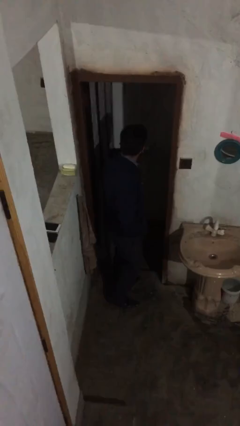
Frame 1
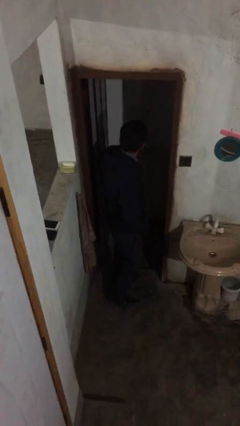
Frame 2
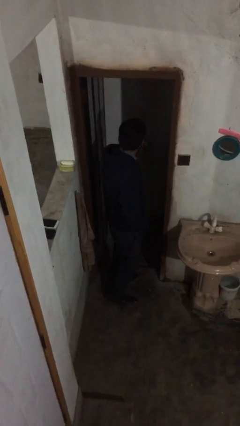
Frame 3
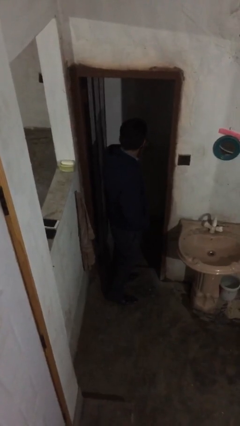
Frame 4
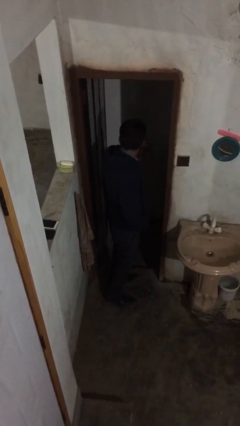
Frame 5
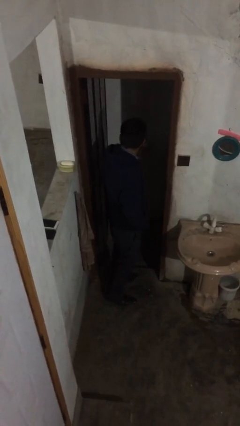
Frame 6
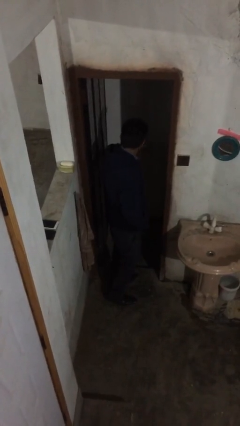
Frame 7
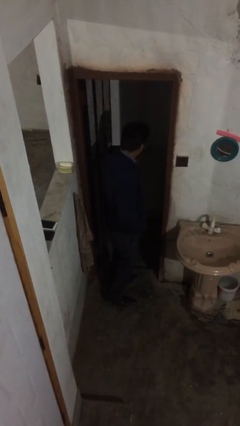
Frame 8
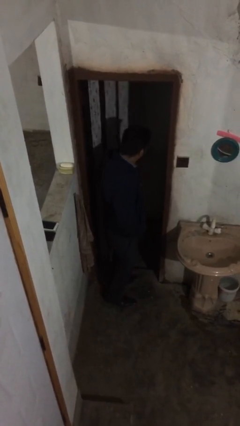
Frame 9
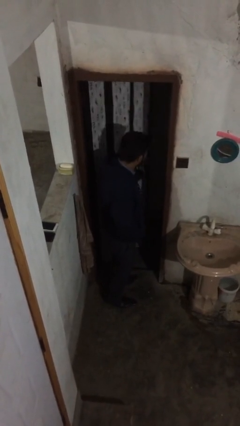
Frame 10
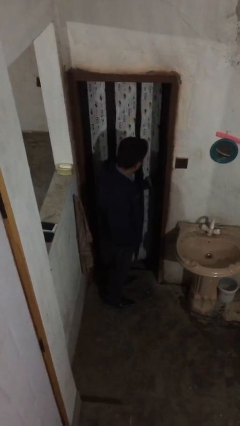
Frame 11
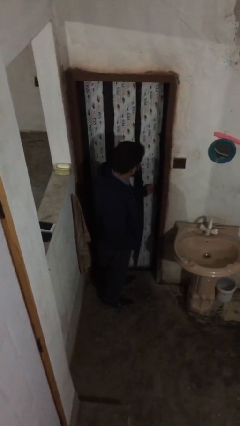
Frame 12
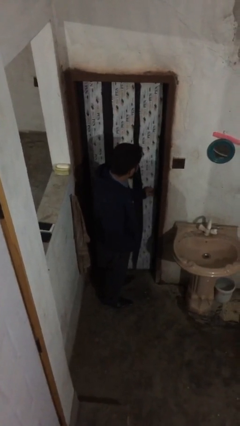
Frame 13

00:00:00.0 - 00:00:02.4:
person closes facility door

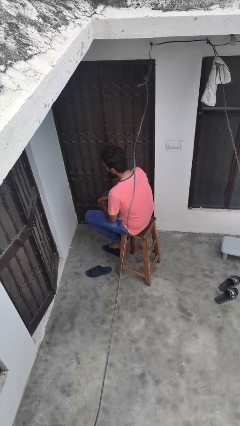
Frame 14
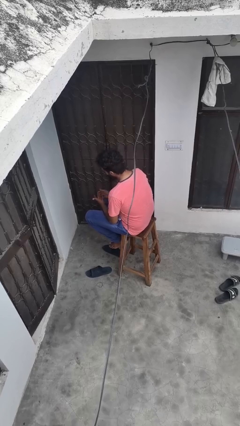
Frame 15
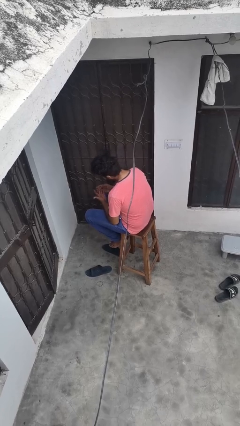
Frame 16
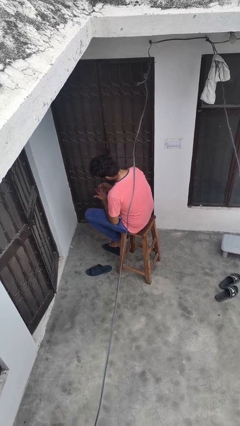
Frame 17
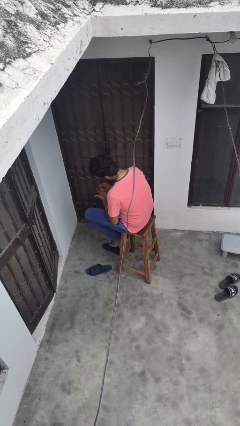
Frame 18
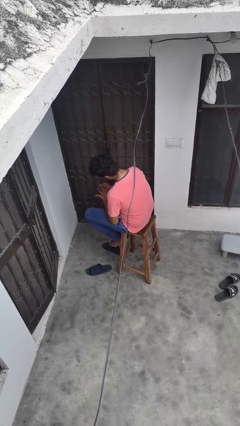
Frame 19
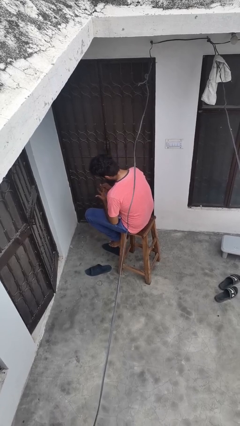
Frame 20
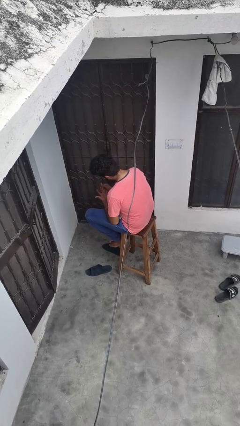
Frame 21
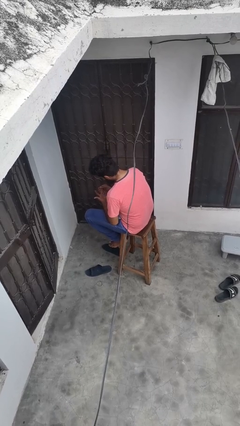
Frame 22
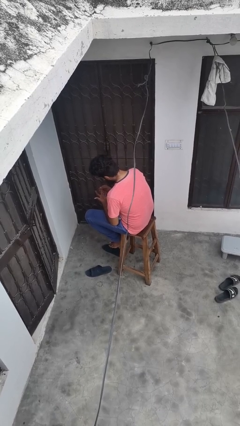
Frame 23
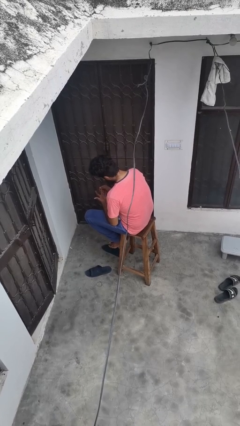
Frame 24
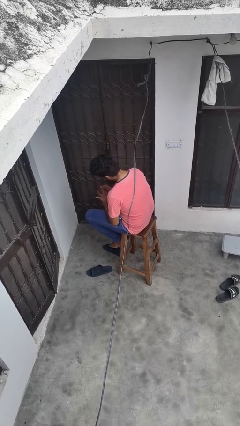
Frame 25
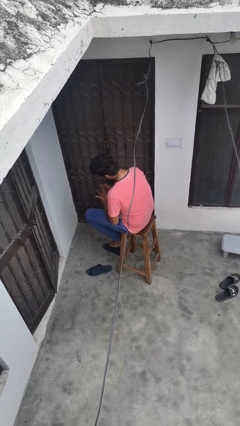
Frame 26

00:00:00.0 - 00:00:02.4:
person looks at hands in lap

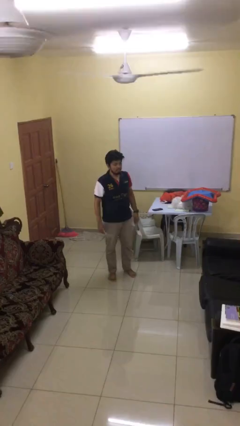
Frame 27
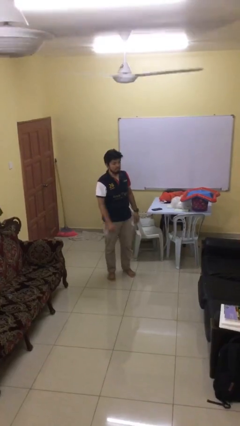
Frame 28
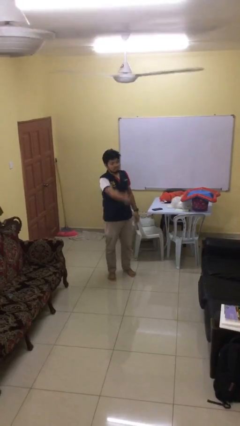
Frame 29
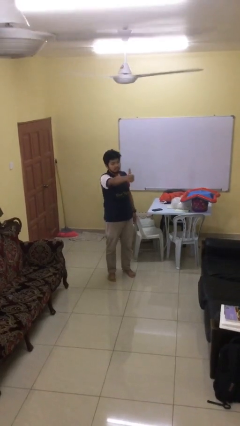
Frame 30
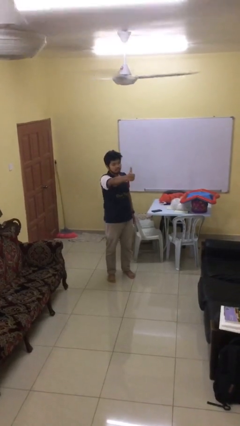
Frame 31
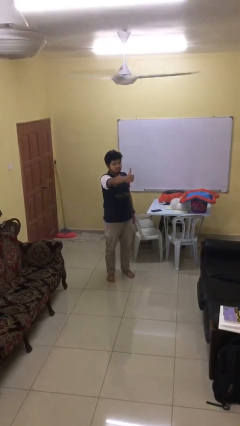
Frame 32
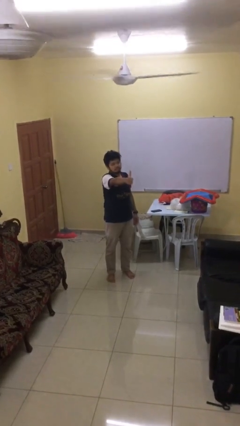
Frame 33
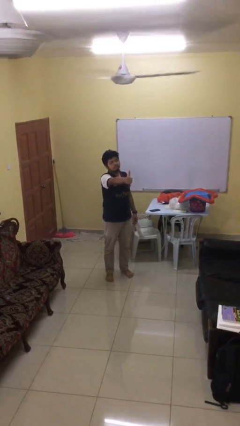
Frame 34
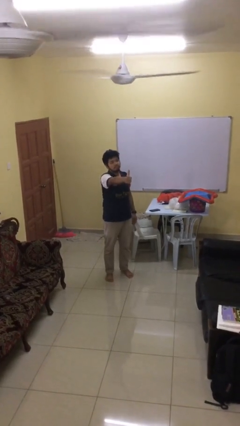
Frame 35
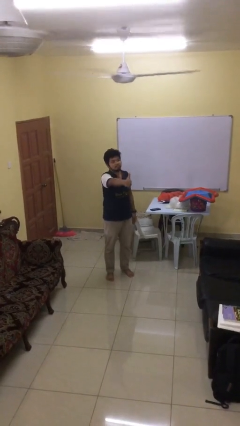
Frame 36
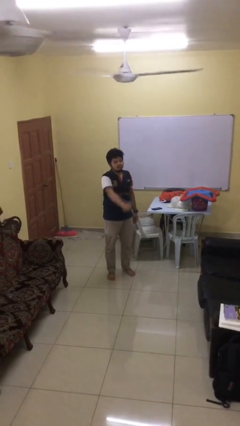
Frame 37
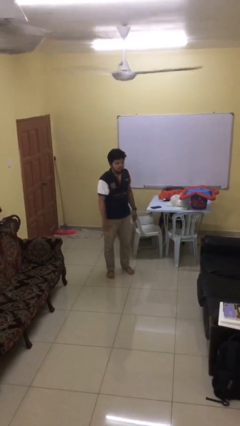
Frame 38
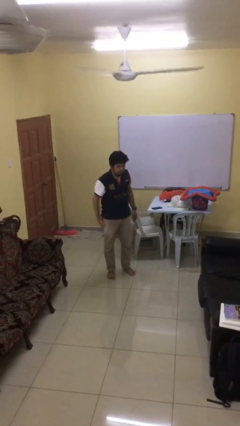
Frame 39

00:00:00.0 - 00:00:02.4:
person gestures thumbs up

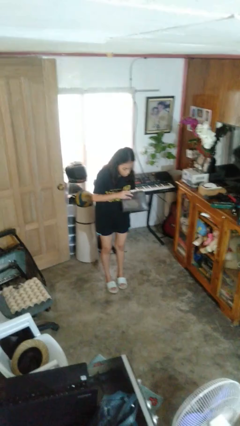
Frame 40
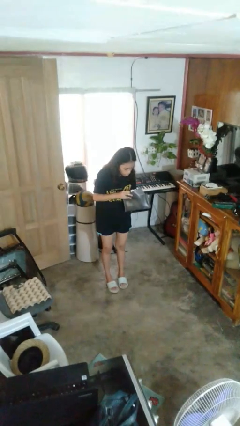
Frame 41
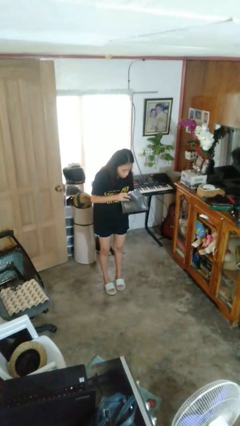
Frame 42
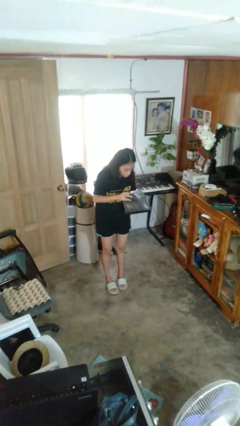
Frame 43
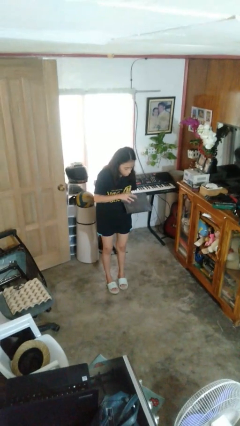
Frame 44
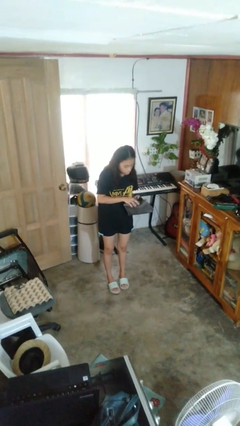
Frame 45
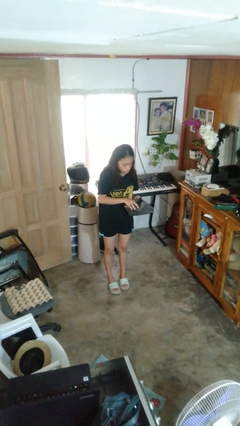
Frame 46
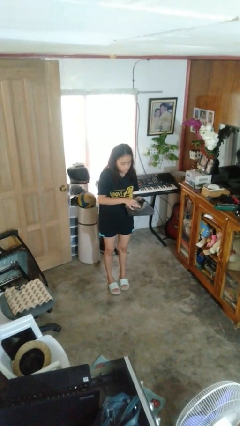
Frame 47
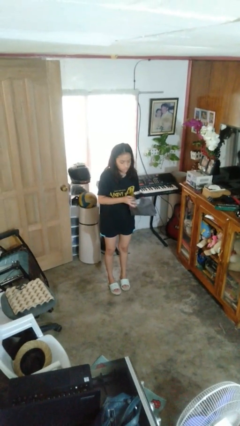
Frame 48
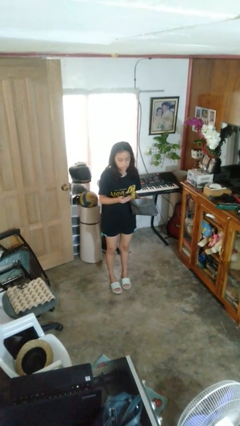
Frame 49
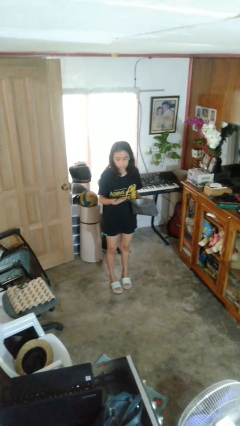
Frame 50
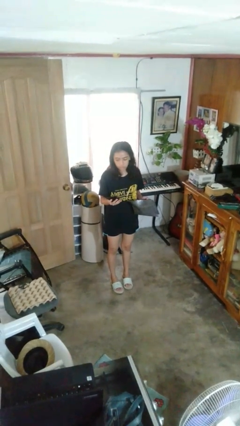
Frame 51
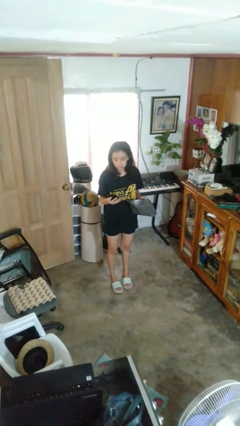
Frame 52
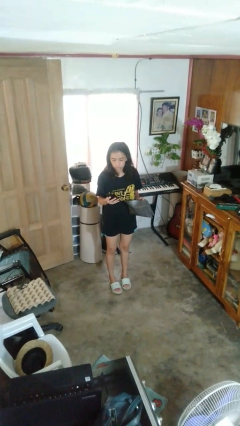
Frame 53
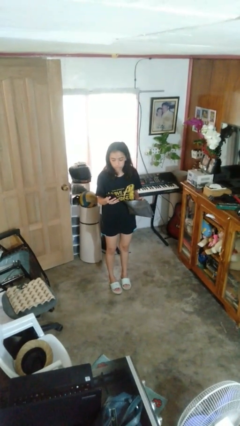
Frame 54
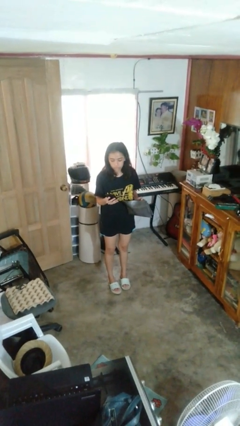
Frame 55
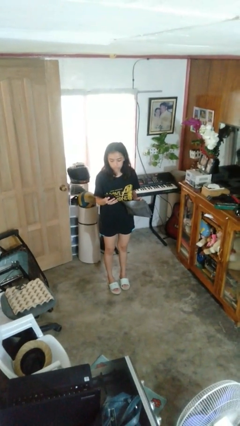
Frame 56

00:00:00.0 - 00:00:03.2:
person takes object from purse

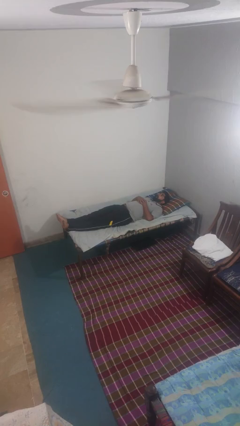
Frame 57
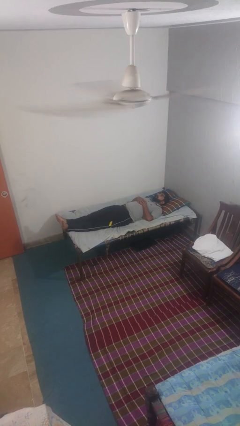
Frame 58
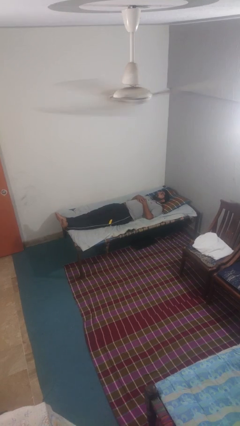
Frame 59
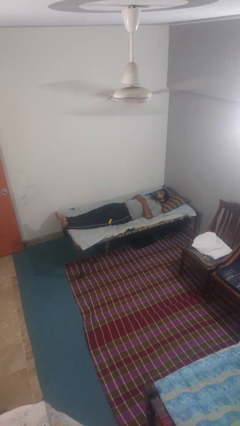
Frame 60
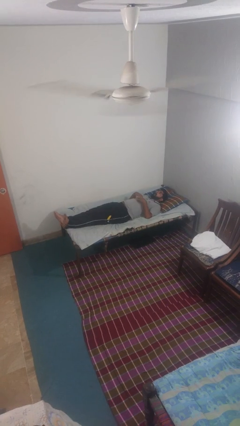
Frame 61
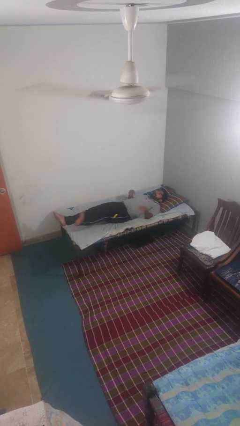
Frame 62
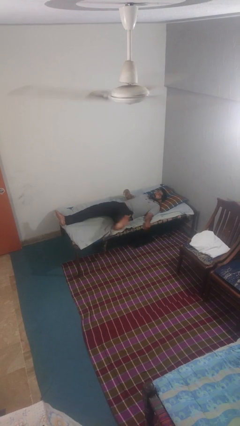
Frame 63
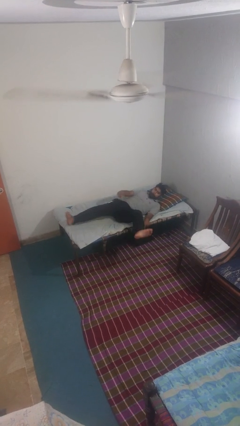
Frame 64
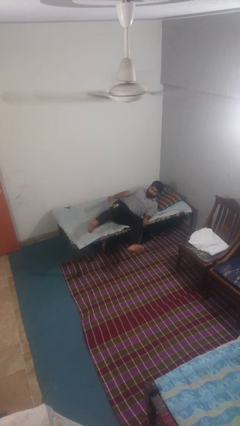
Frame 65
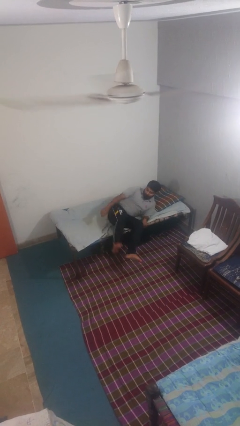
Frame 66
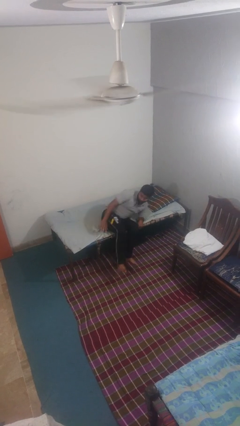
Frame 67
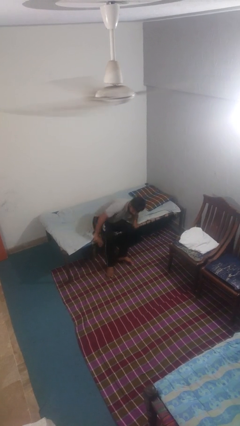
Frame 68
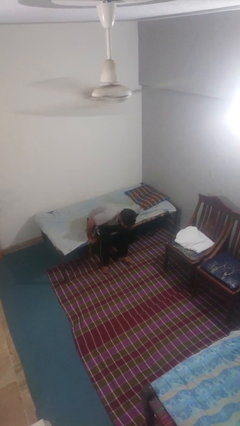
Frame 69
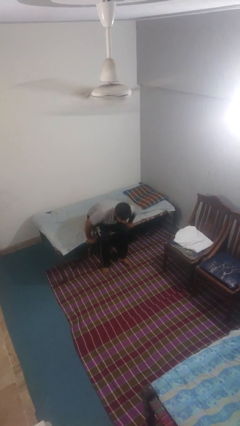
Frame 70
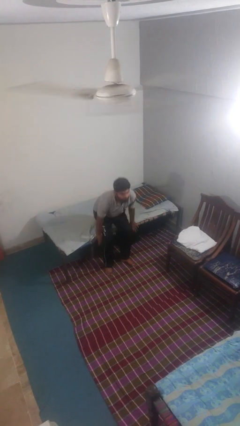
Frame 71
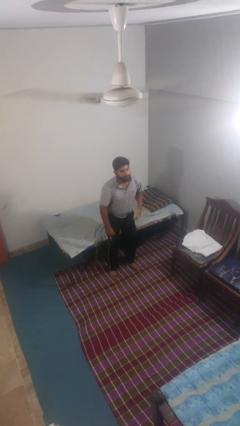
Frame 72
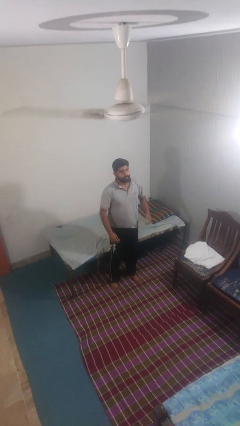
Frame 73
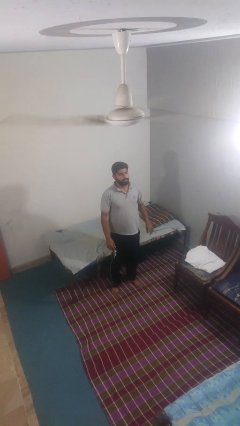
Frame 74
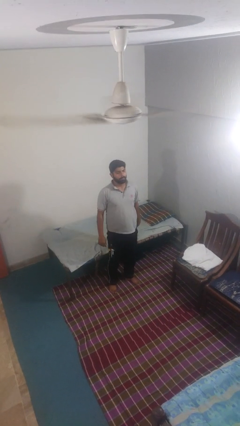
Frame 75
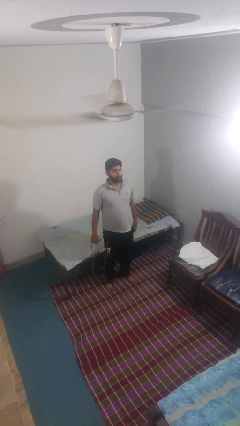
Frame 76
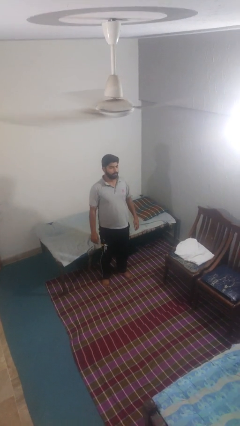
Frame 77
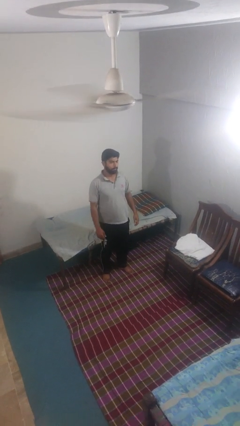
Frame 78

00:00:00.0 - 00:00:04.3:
person stands up

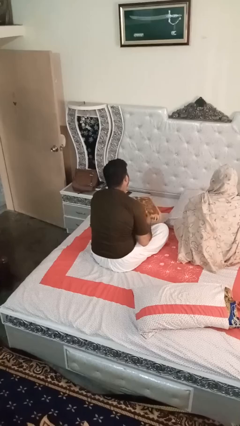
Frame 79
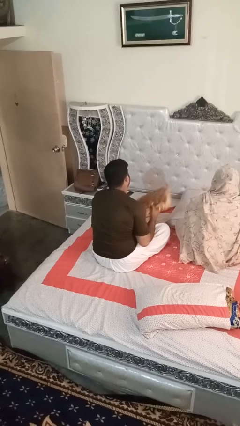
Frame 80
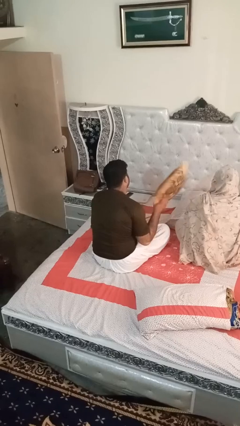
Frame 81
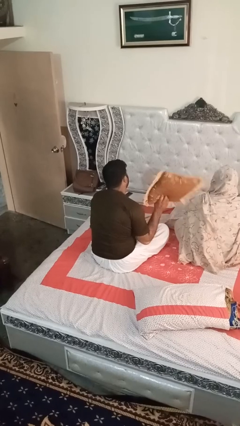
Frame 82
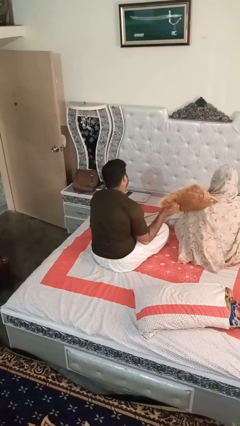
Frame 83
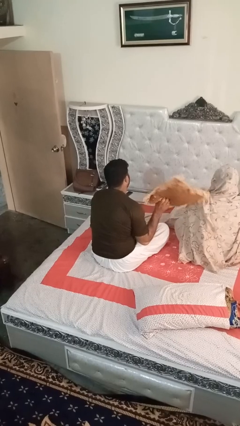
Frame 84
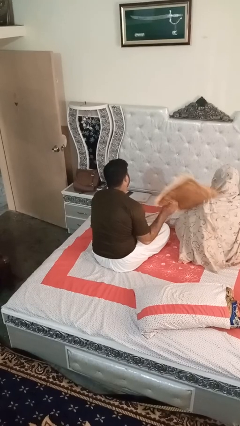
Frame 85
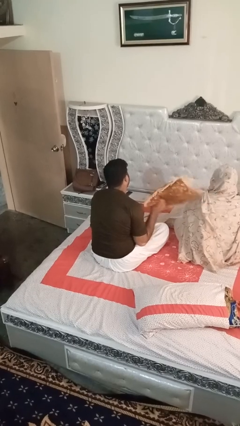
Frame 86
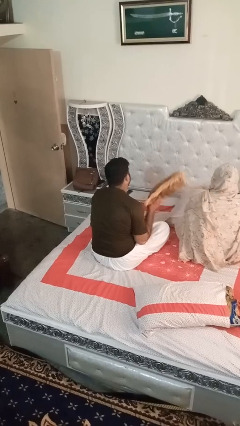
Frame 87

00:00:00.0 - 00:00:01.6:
person hits person with pillow

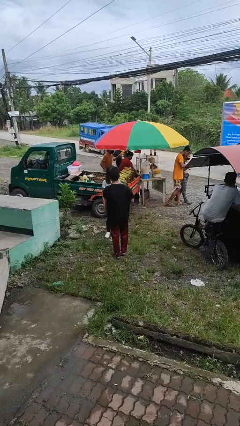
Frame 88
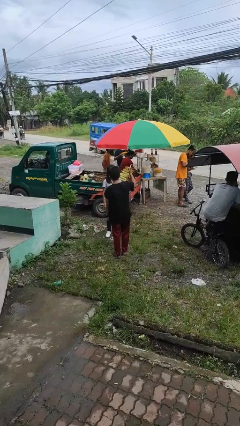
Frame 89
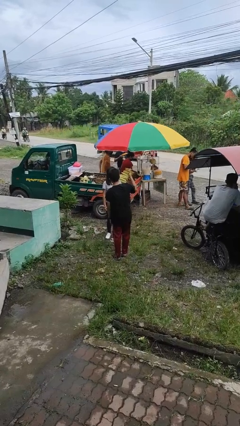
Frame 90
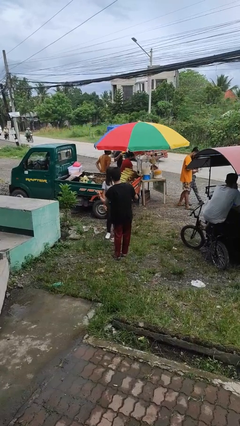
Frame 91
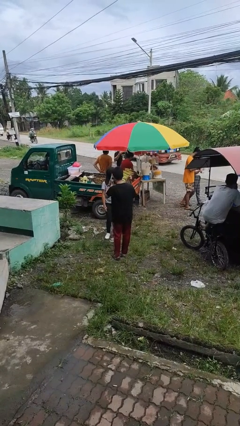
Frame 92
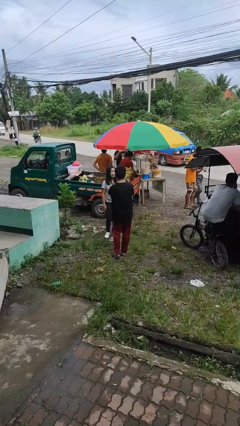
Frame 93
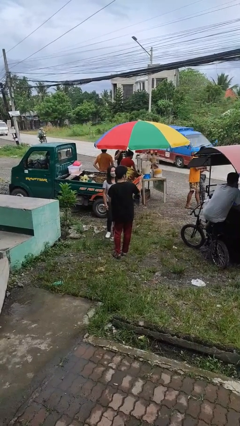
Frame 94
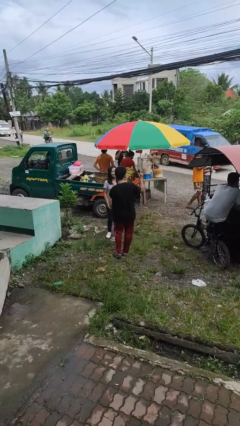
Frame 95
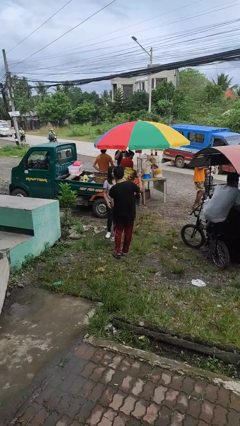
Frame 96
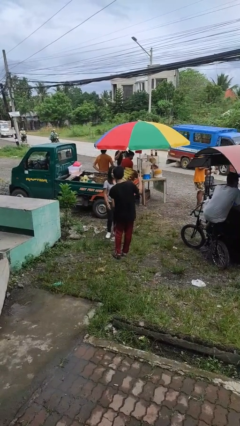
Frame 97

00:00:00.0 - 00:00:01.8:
person talks to person
